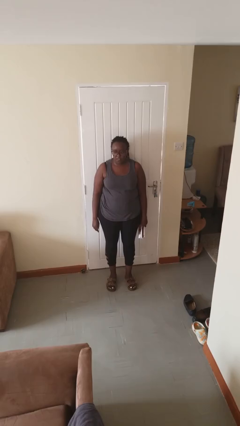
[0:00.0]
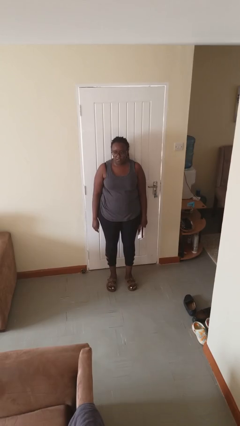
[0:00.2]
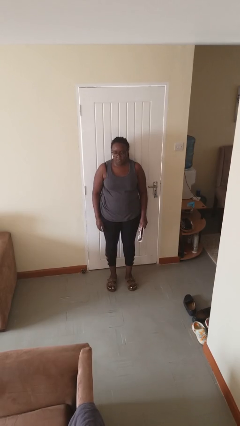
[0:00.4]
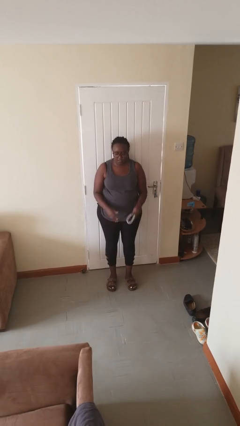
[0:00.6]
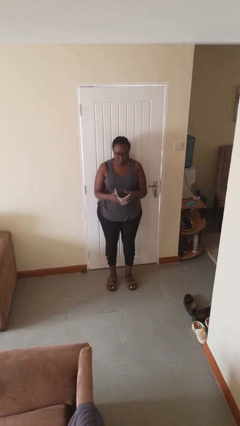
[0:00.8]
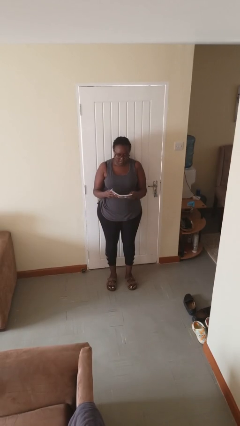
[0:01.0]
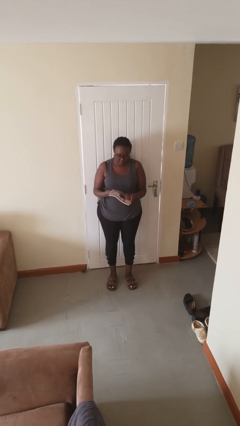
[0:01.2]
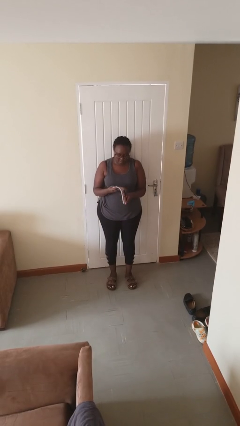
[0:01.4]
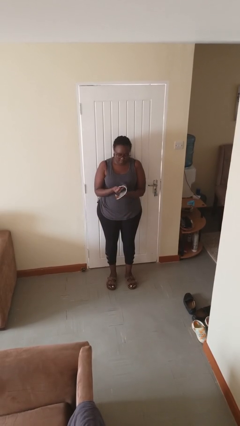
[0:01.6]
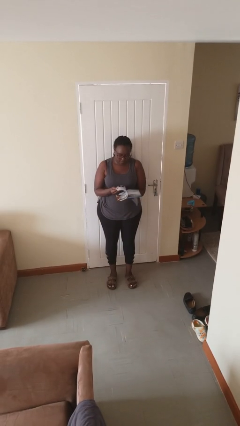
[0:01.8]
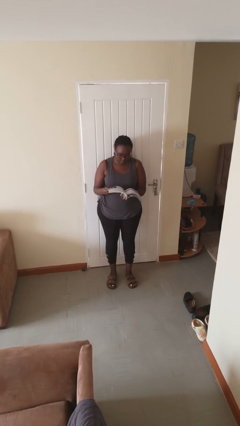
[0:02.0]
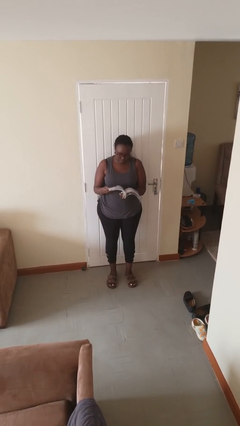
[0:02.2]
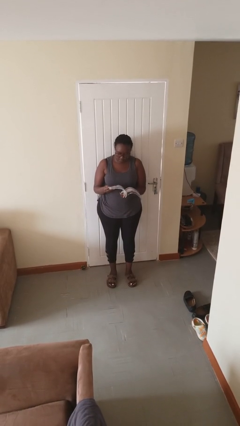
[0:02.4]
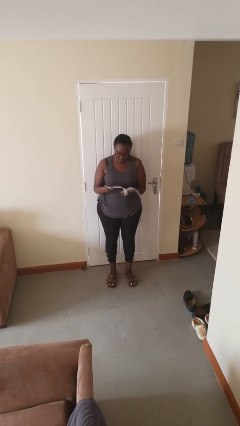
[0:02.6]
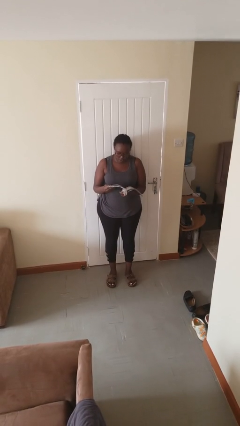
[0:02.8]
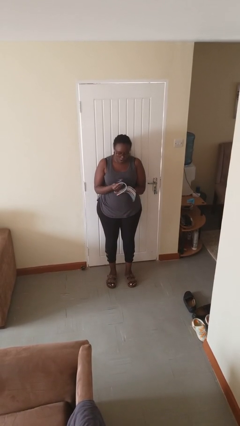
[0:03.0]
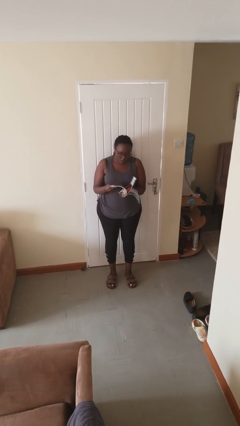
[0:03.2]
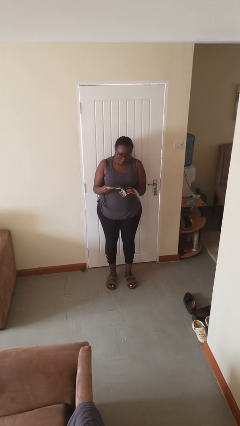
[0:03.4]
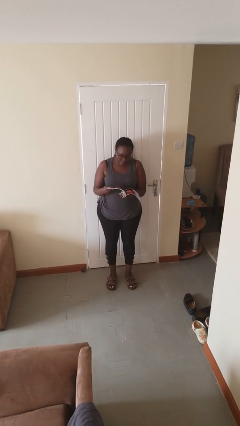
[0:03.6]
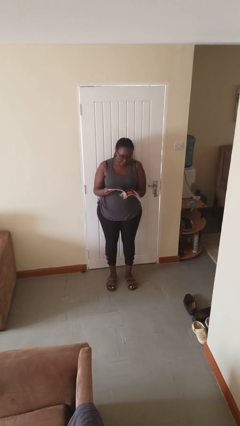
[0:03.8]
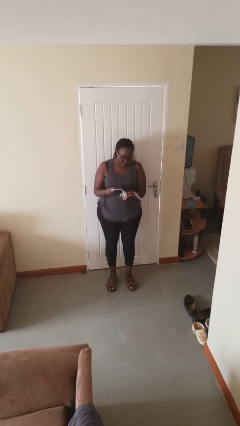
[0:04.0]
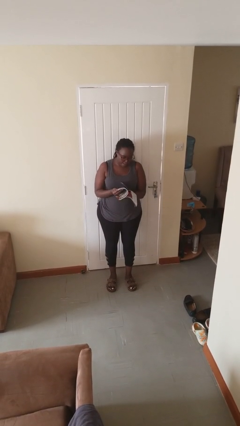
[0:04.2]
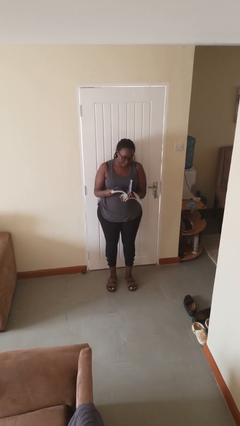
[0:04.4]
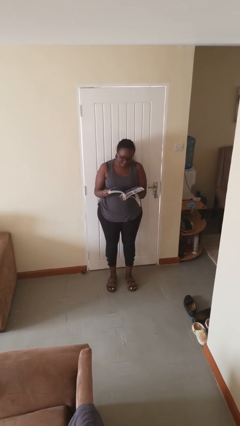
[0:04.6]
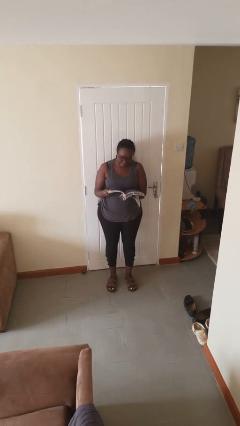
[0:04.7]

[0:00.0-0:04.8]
person reads magazine

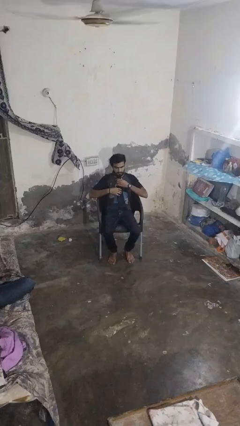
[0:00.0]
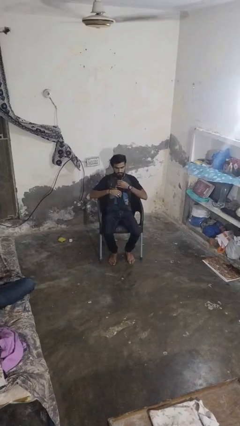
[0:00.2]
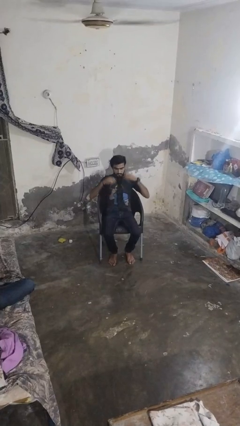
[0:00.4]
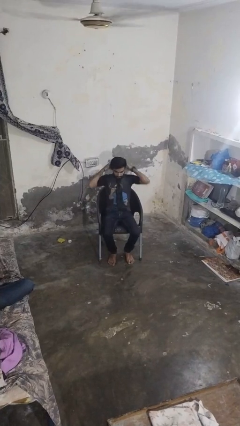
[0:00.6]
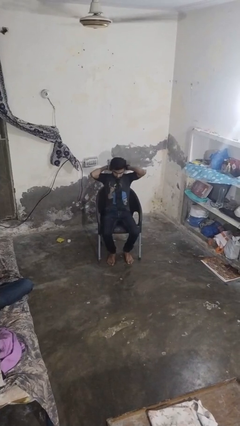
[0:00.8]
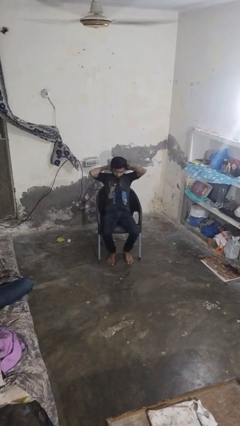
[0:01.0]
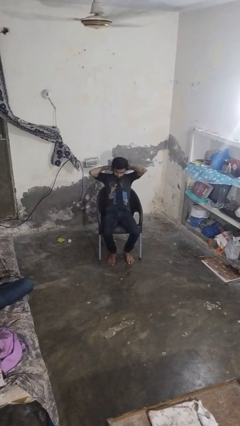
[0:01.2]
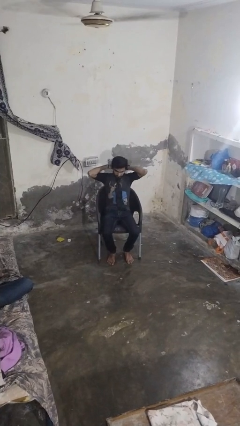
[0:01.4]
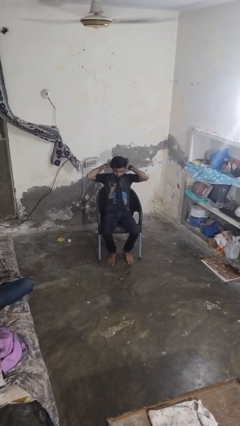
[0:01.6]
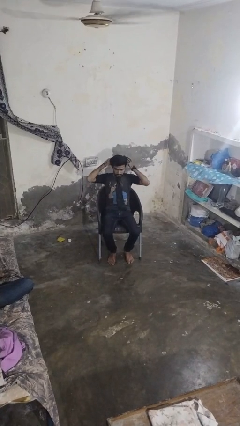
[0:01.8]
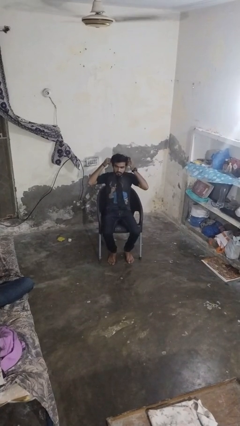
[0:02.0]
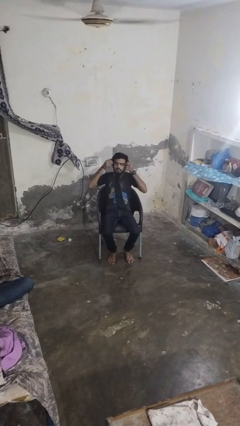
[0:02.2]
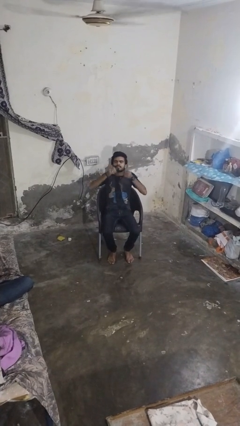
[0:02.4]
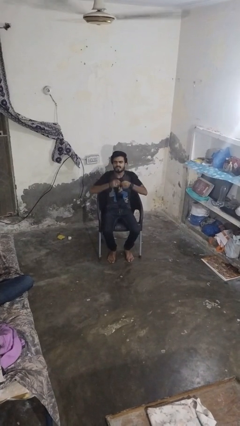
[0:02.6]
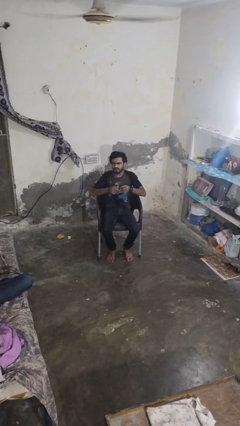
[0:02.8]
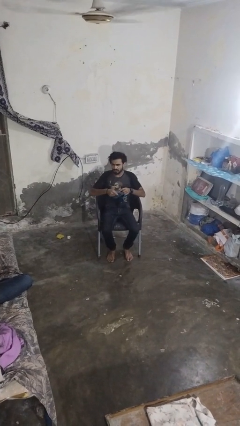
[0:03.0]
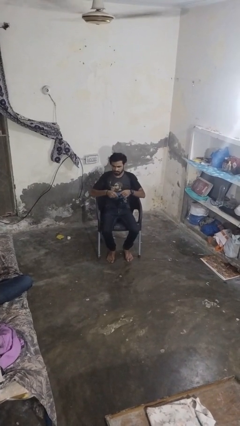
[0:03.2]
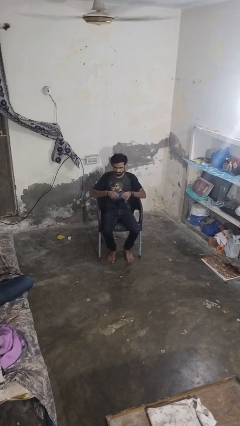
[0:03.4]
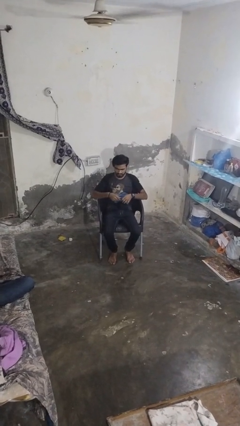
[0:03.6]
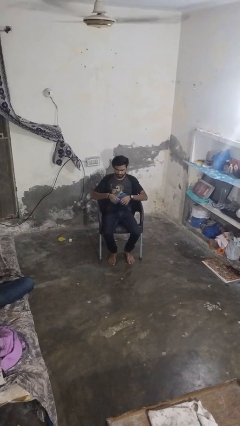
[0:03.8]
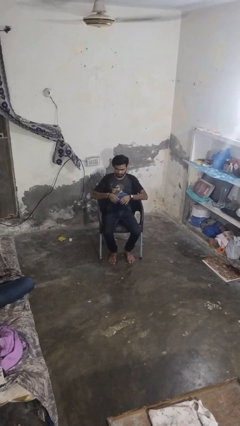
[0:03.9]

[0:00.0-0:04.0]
person takes off necktie

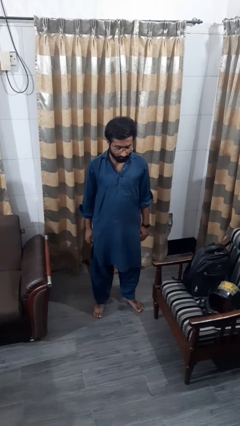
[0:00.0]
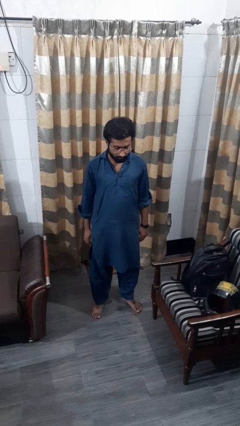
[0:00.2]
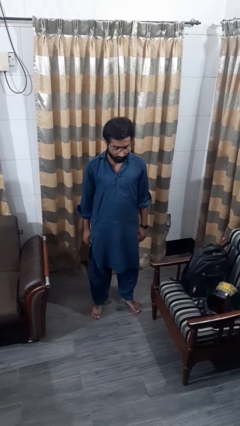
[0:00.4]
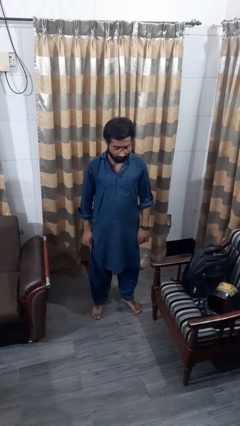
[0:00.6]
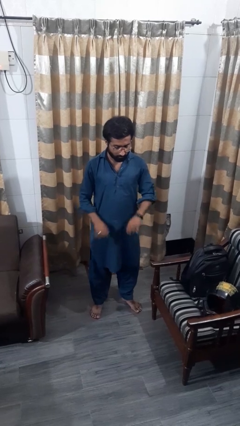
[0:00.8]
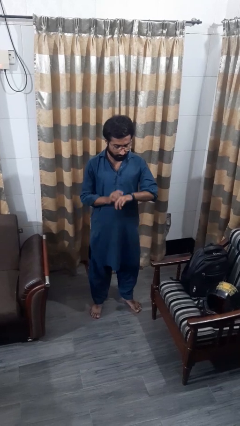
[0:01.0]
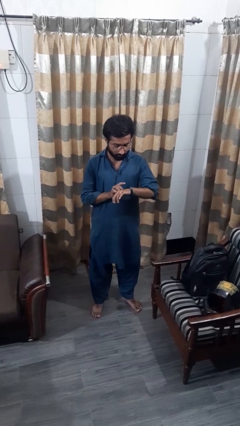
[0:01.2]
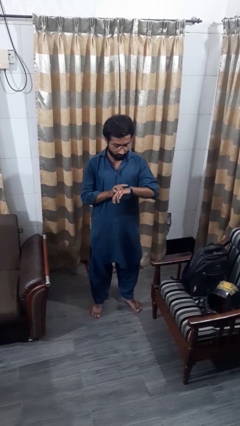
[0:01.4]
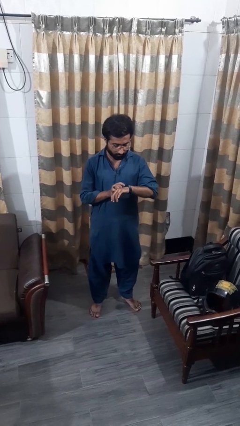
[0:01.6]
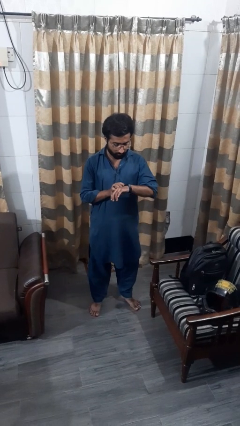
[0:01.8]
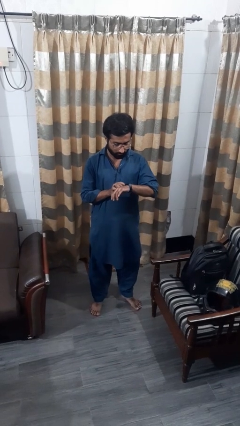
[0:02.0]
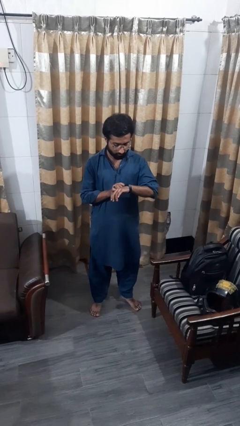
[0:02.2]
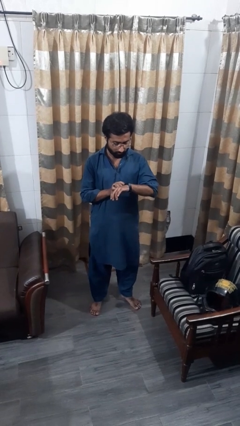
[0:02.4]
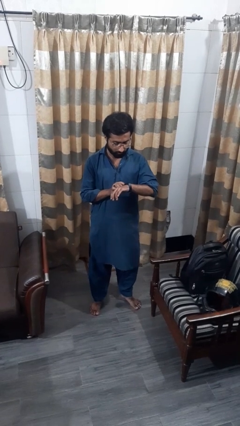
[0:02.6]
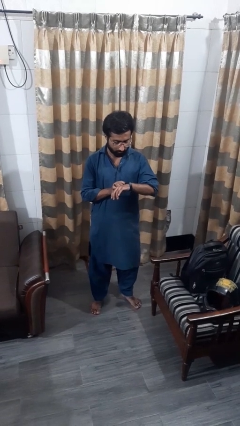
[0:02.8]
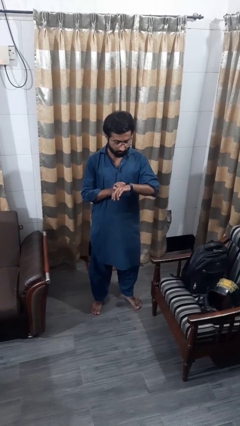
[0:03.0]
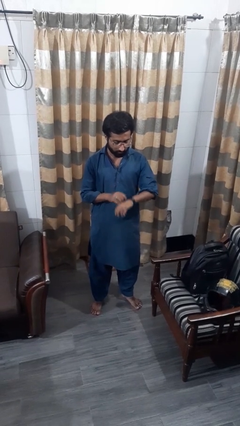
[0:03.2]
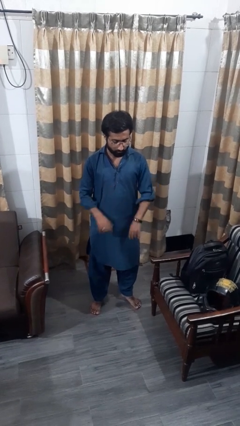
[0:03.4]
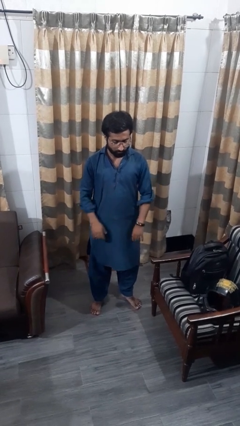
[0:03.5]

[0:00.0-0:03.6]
person looks at wristwatch

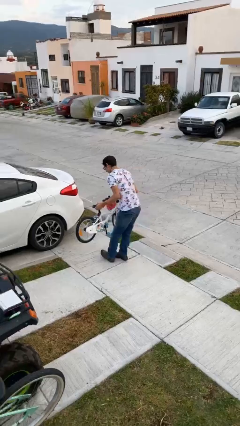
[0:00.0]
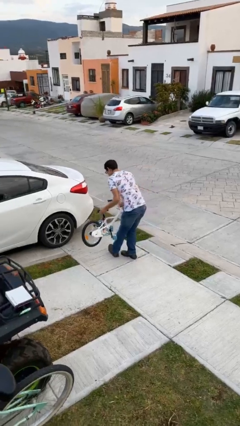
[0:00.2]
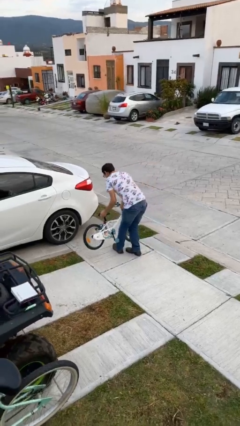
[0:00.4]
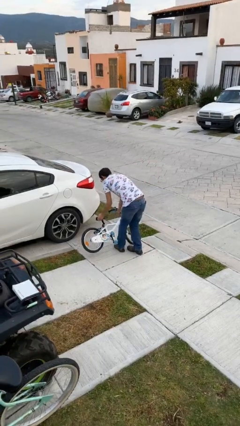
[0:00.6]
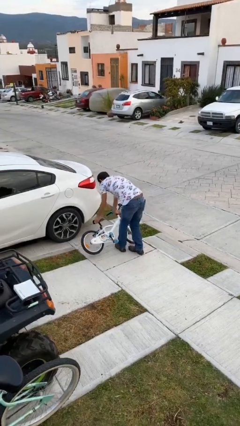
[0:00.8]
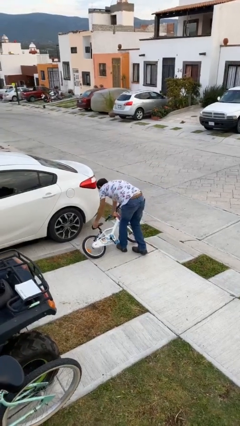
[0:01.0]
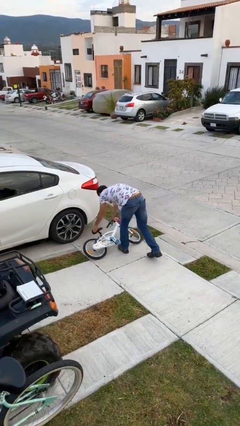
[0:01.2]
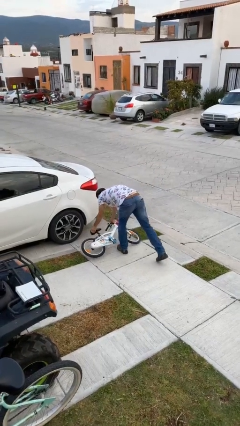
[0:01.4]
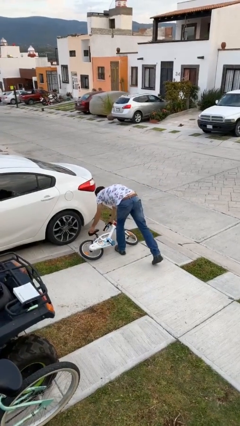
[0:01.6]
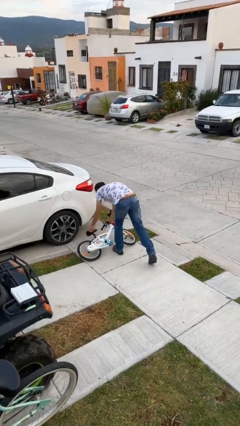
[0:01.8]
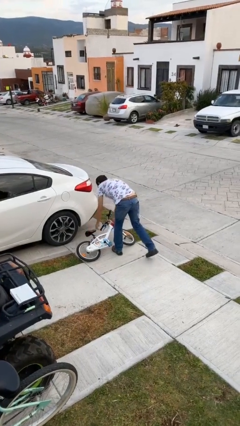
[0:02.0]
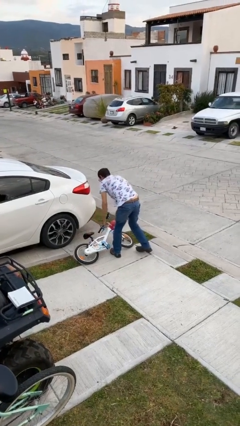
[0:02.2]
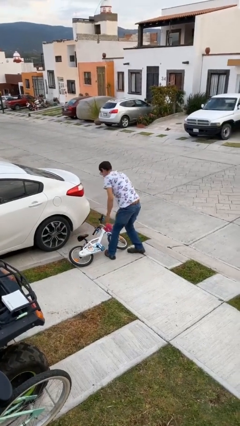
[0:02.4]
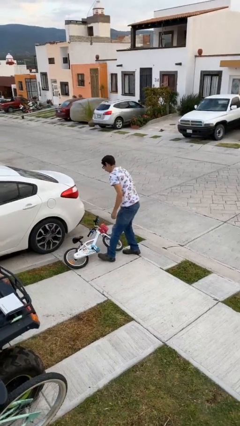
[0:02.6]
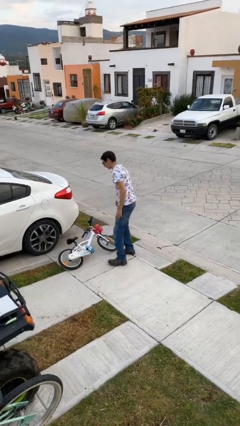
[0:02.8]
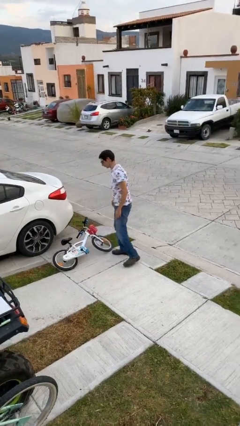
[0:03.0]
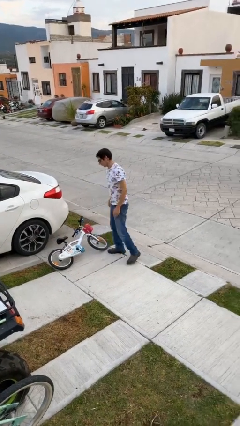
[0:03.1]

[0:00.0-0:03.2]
person puts down object on floor

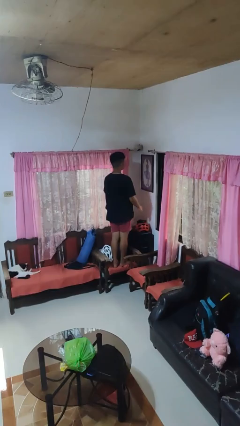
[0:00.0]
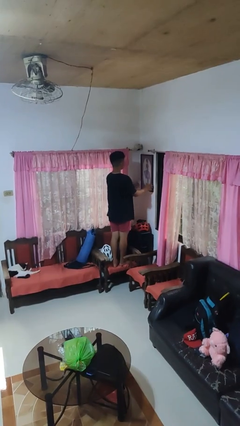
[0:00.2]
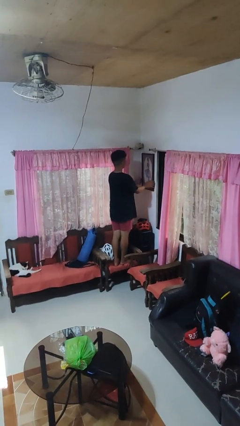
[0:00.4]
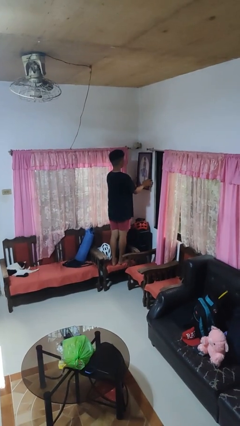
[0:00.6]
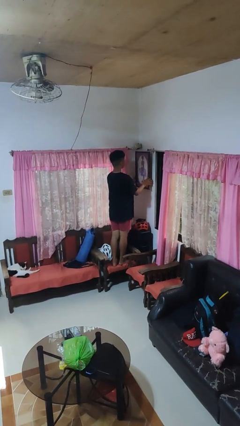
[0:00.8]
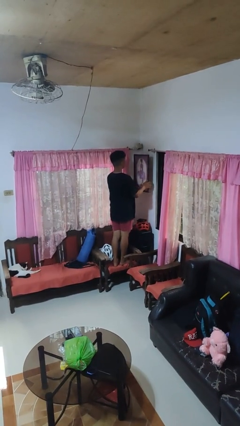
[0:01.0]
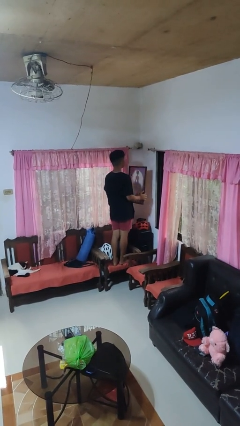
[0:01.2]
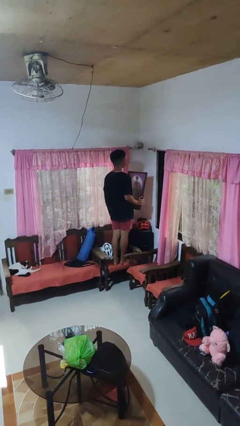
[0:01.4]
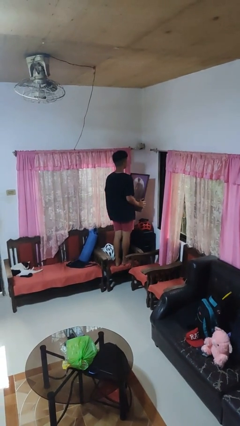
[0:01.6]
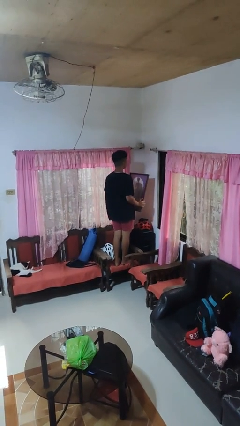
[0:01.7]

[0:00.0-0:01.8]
person takes down picture frame

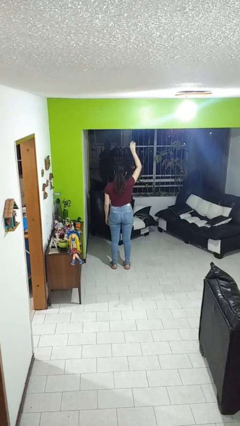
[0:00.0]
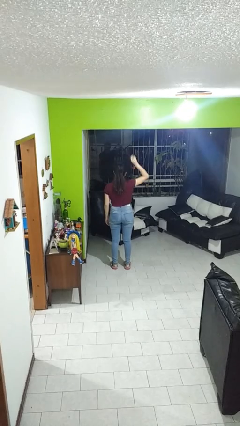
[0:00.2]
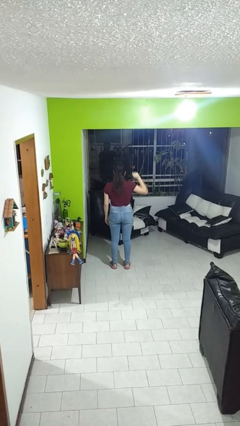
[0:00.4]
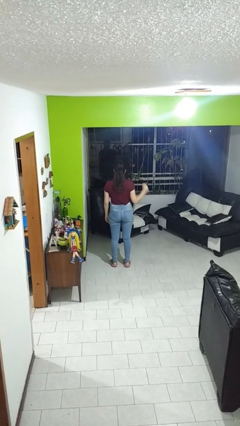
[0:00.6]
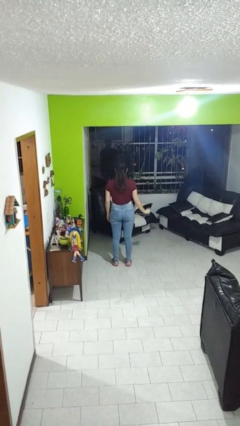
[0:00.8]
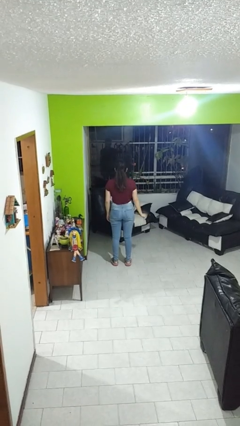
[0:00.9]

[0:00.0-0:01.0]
person gestures lower hand
